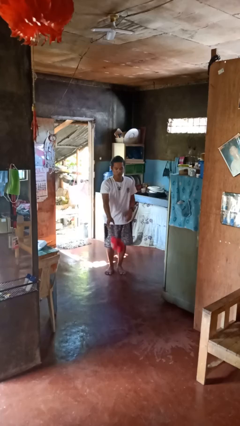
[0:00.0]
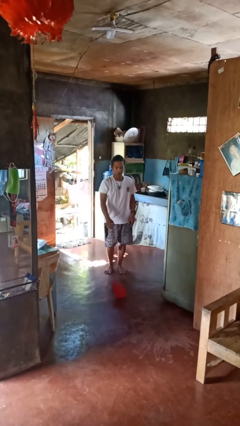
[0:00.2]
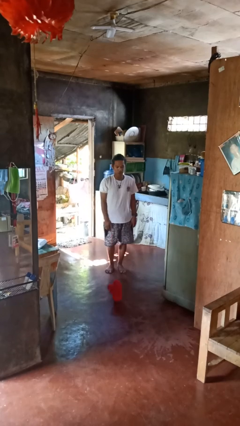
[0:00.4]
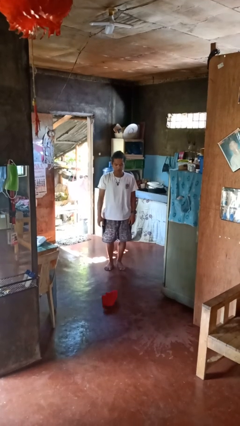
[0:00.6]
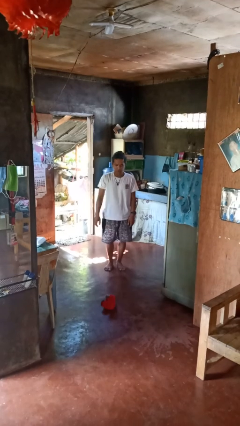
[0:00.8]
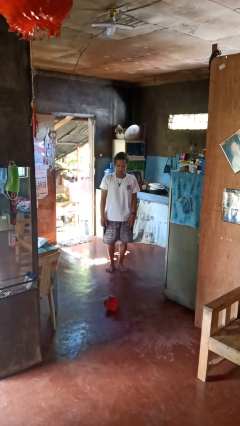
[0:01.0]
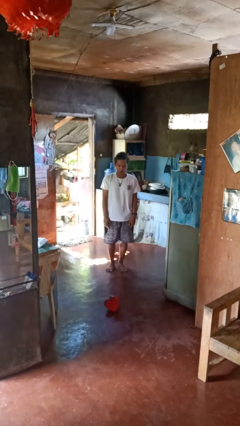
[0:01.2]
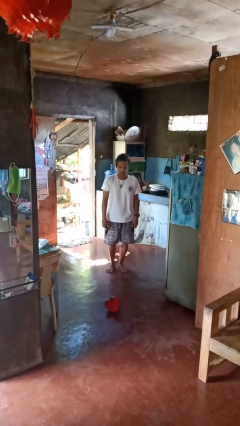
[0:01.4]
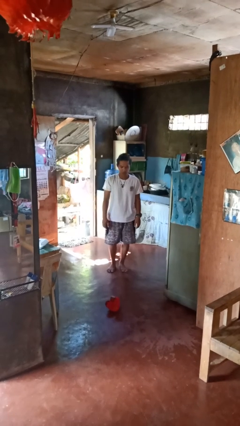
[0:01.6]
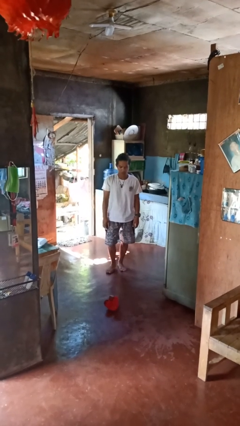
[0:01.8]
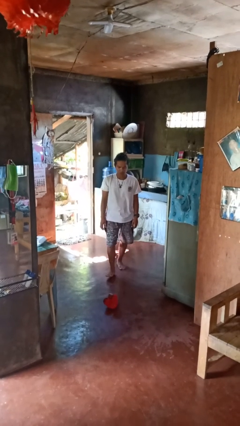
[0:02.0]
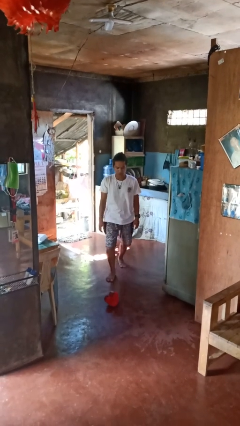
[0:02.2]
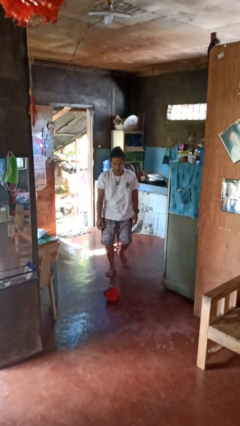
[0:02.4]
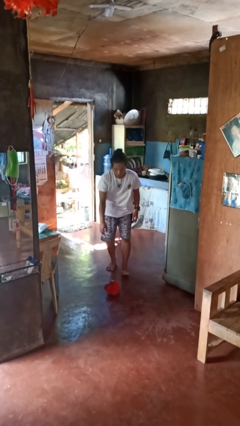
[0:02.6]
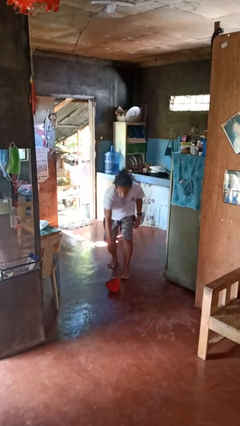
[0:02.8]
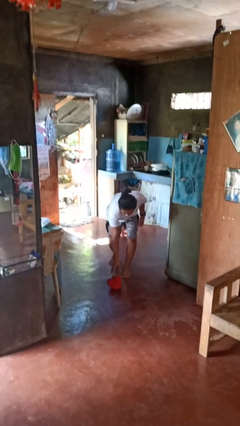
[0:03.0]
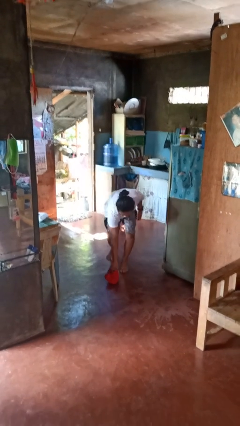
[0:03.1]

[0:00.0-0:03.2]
person throws object to ground

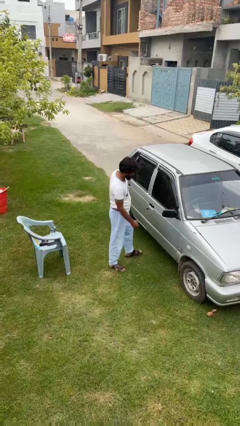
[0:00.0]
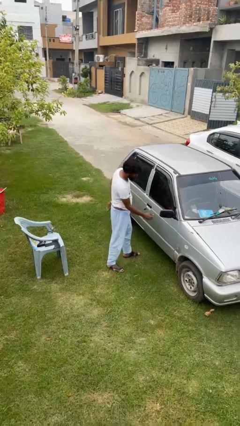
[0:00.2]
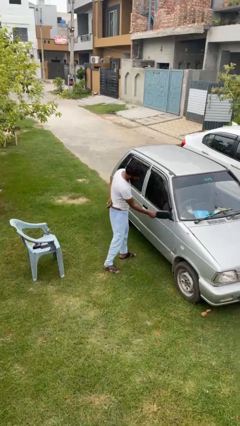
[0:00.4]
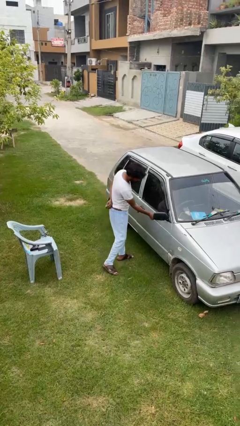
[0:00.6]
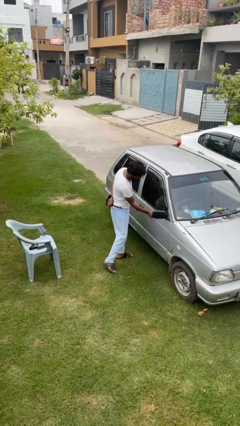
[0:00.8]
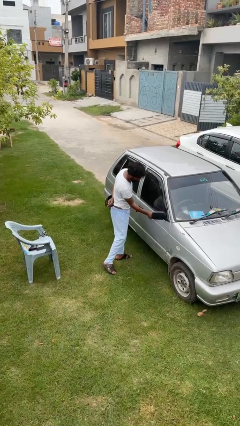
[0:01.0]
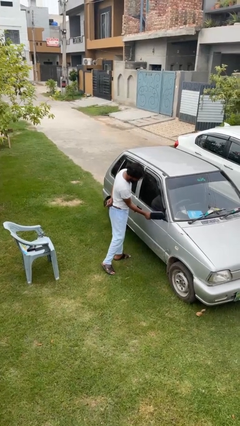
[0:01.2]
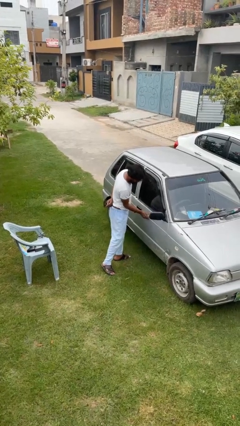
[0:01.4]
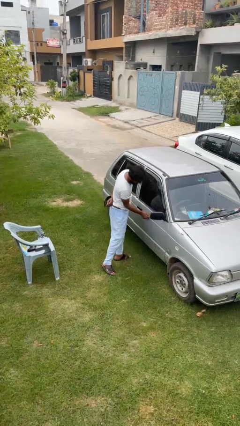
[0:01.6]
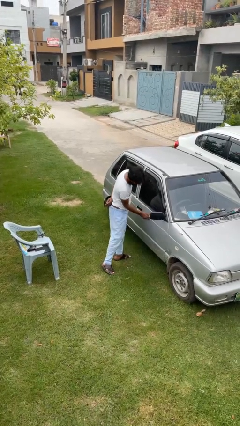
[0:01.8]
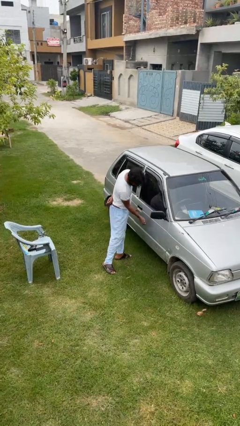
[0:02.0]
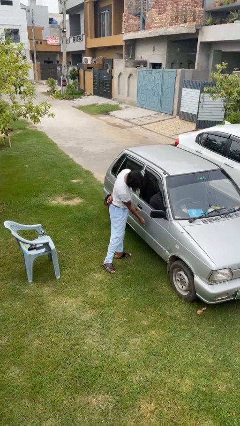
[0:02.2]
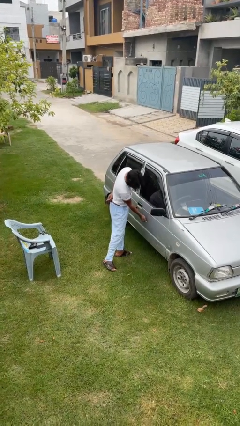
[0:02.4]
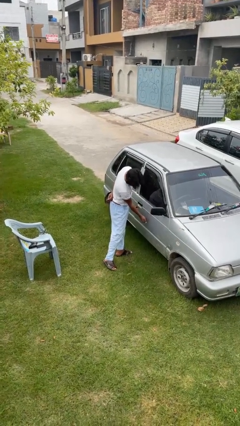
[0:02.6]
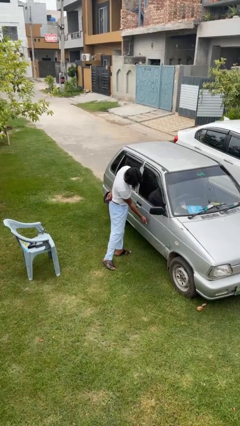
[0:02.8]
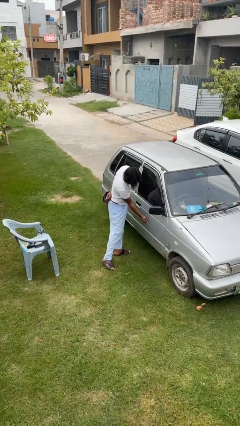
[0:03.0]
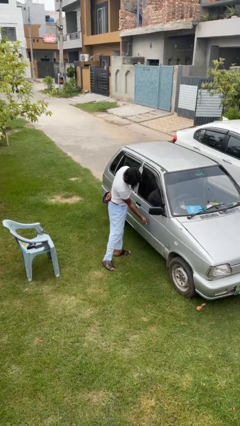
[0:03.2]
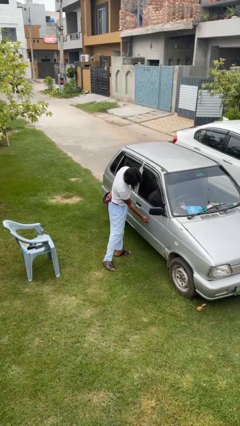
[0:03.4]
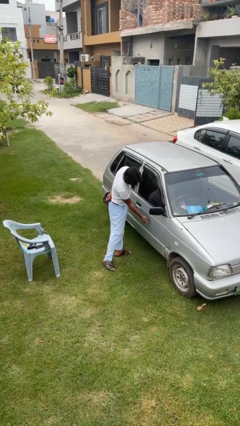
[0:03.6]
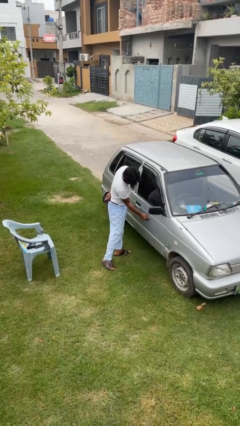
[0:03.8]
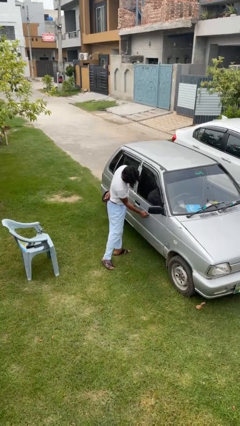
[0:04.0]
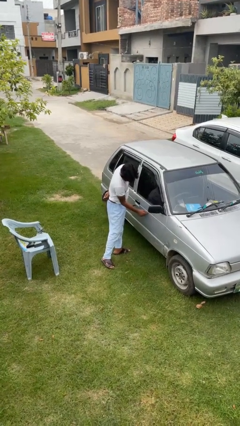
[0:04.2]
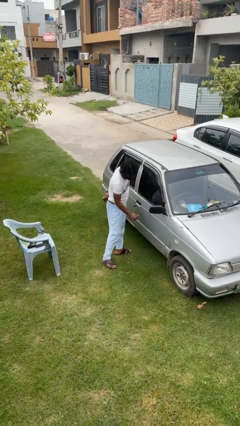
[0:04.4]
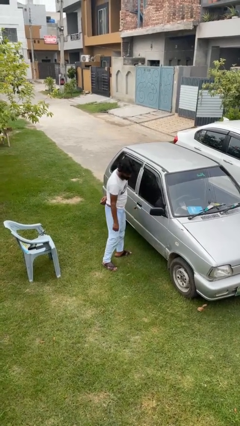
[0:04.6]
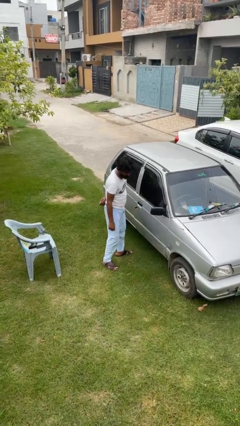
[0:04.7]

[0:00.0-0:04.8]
person taps object with finger

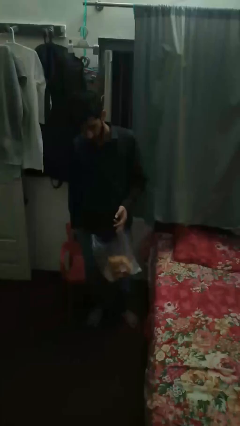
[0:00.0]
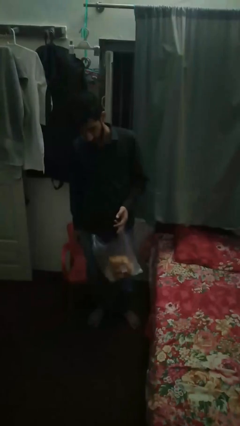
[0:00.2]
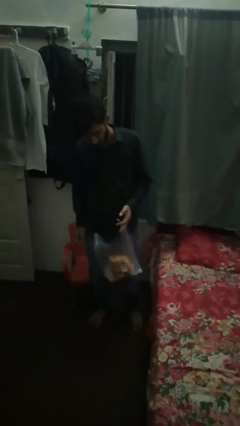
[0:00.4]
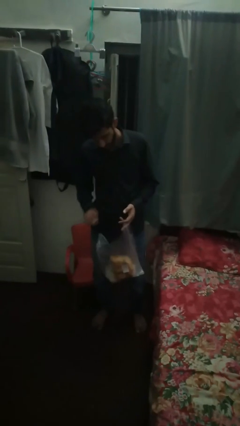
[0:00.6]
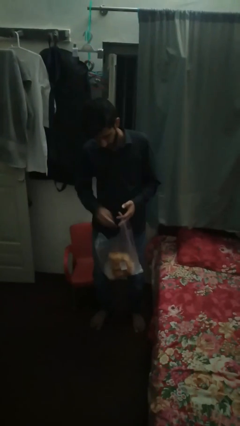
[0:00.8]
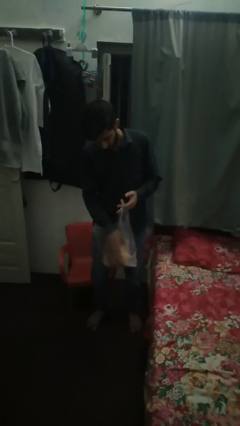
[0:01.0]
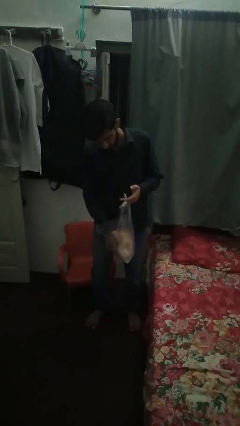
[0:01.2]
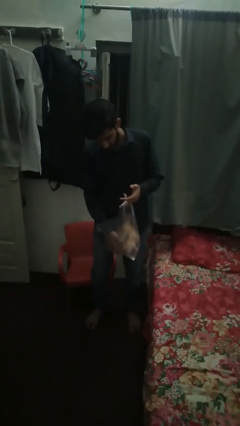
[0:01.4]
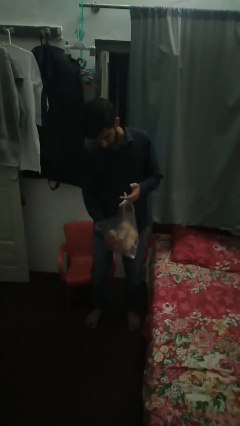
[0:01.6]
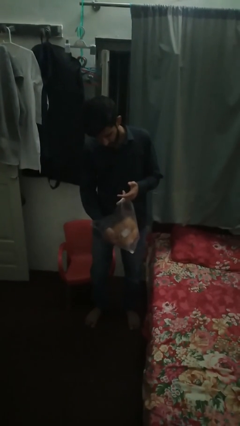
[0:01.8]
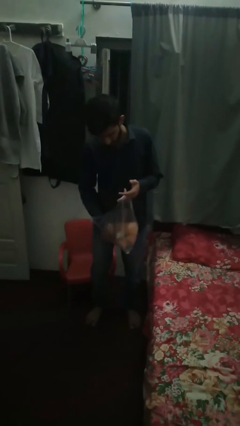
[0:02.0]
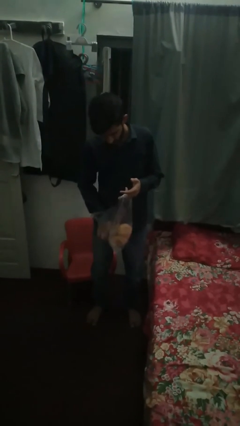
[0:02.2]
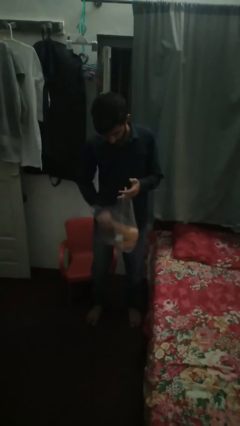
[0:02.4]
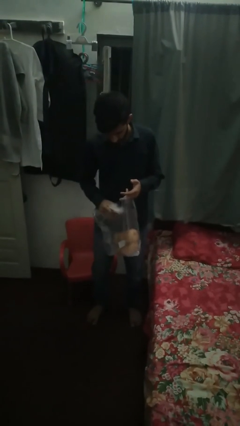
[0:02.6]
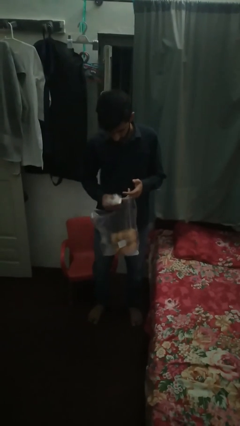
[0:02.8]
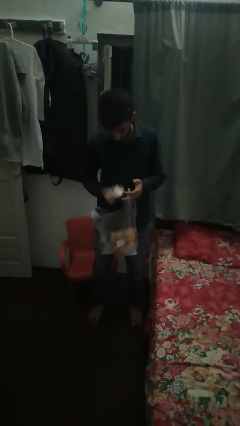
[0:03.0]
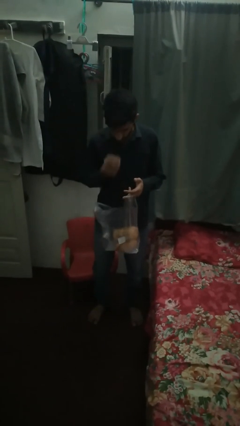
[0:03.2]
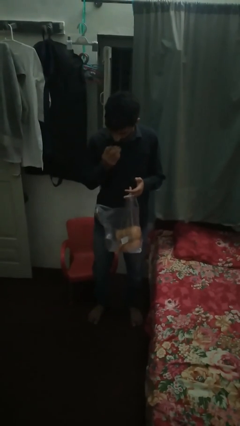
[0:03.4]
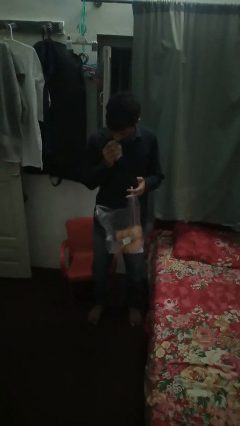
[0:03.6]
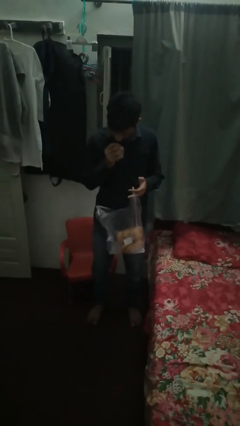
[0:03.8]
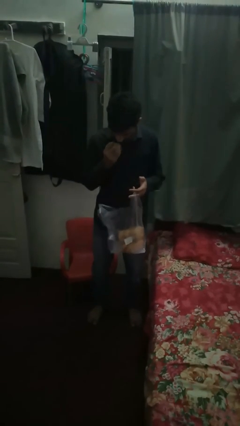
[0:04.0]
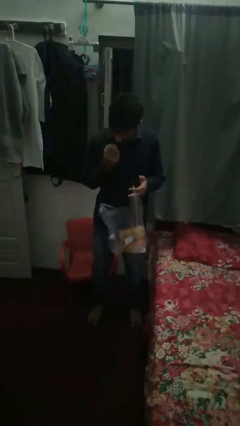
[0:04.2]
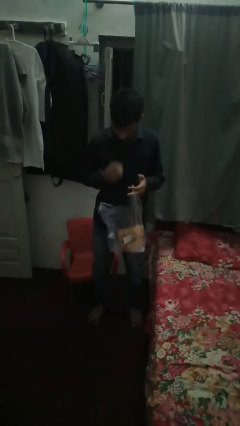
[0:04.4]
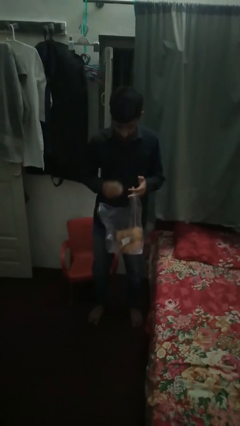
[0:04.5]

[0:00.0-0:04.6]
person eats snack from bag

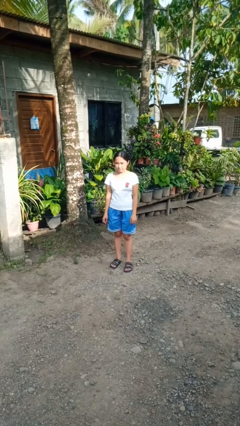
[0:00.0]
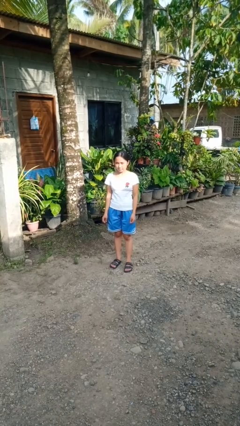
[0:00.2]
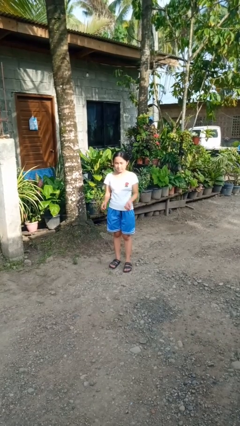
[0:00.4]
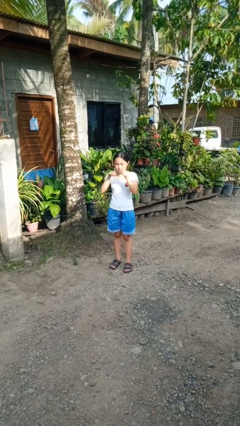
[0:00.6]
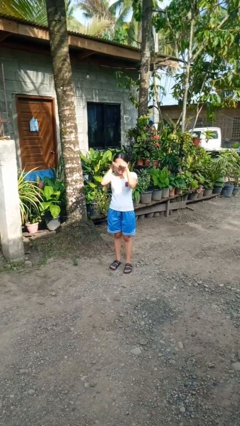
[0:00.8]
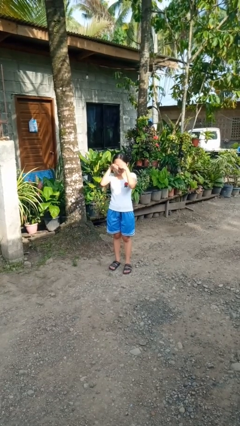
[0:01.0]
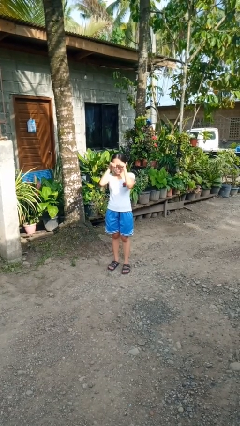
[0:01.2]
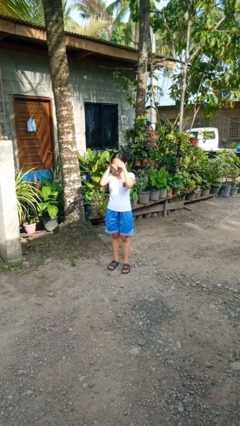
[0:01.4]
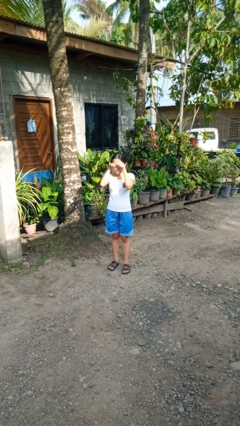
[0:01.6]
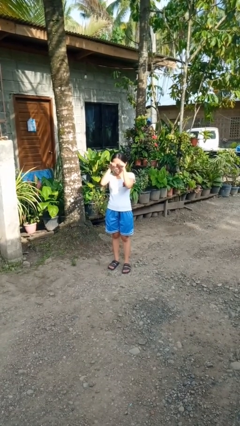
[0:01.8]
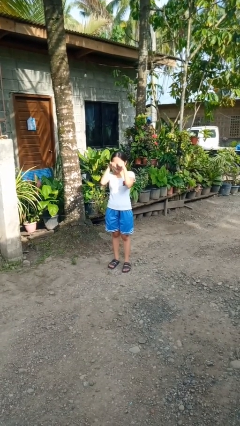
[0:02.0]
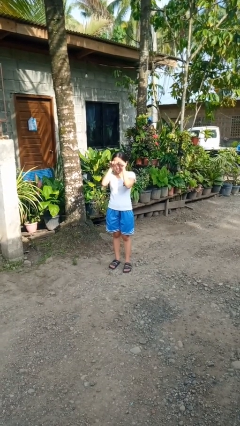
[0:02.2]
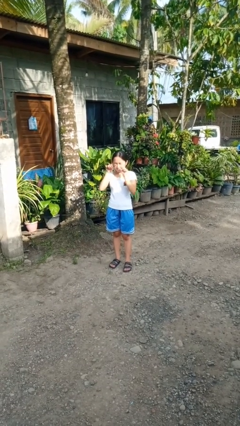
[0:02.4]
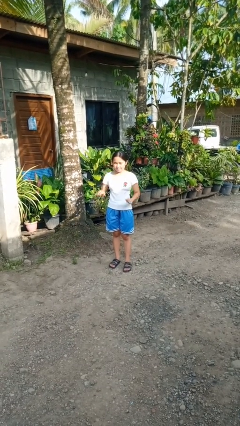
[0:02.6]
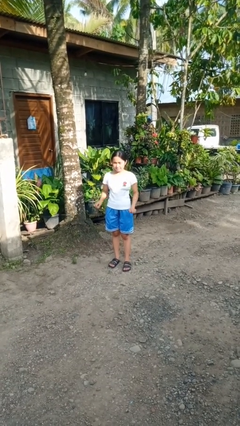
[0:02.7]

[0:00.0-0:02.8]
person rubs eyes

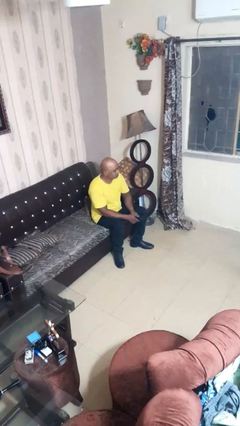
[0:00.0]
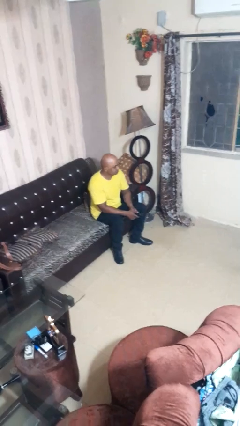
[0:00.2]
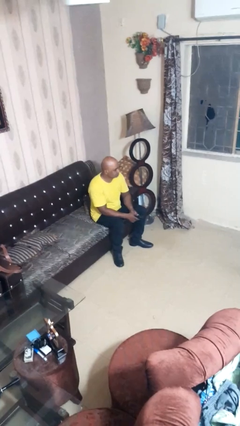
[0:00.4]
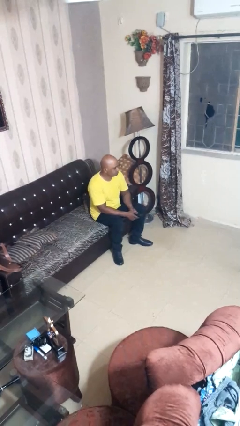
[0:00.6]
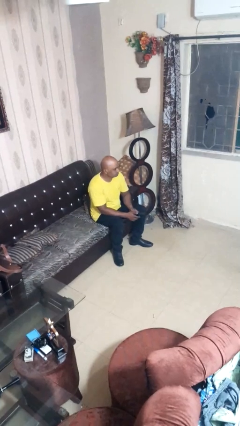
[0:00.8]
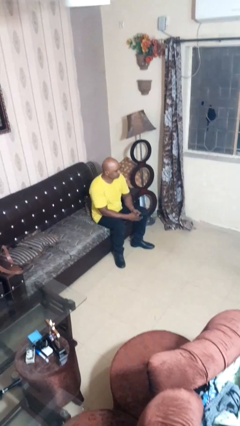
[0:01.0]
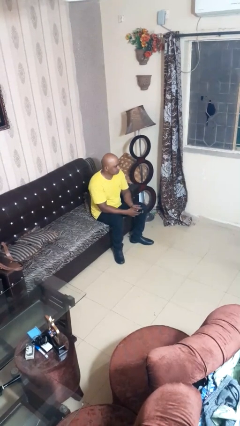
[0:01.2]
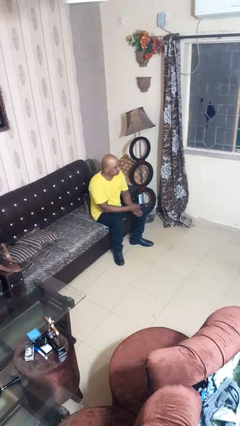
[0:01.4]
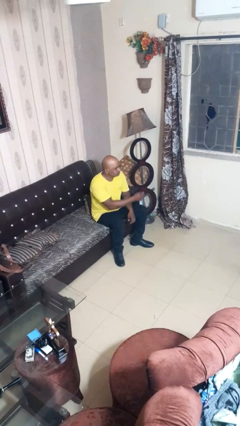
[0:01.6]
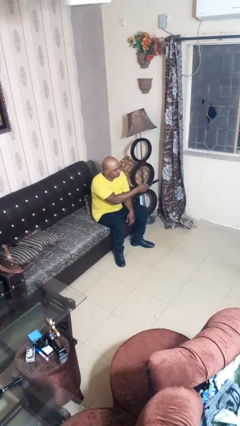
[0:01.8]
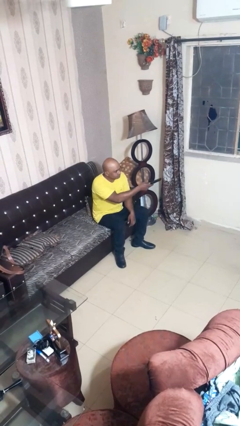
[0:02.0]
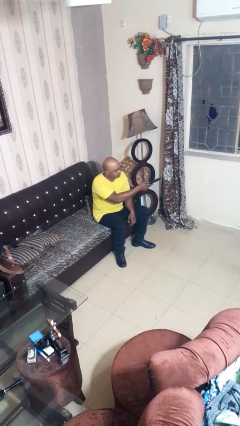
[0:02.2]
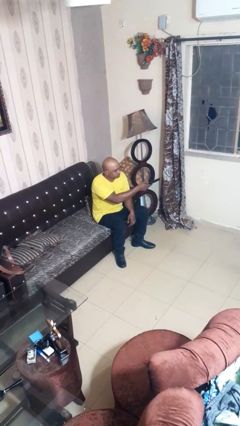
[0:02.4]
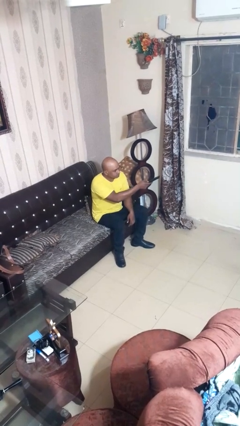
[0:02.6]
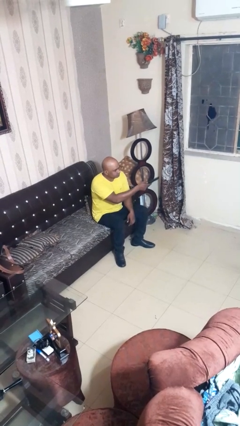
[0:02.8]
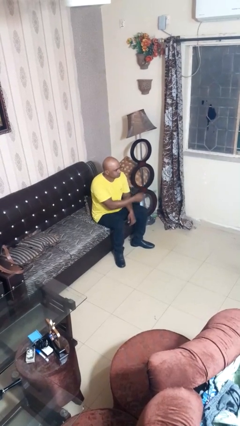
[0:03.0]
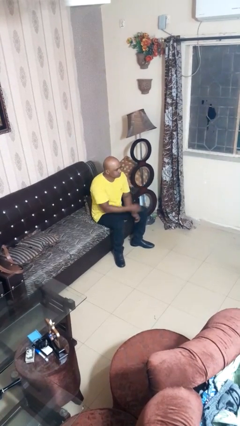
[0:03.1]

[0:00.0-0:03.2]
person uses television remote
